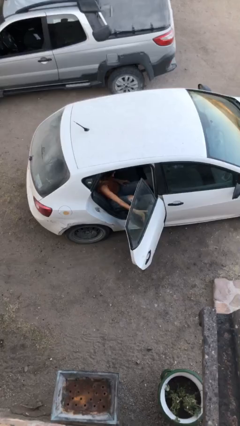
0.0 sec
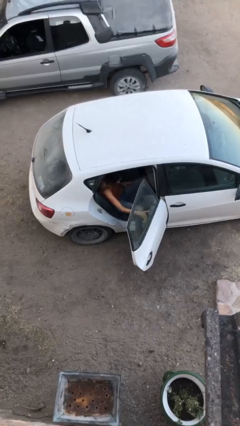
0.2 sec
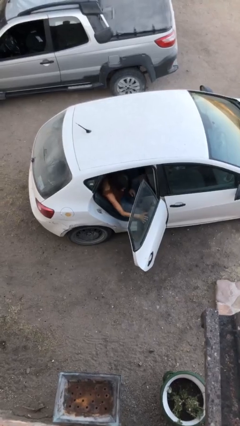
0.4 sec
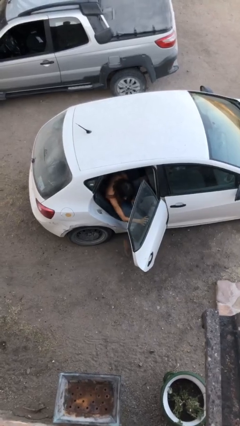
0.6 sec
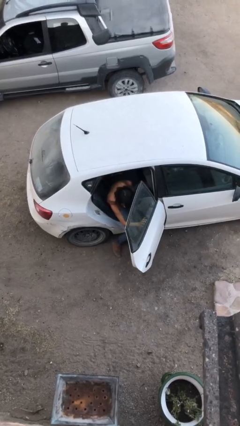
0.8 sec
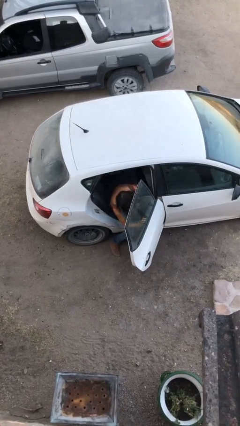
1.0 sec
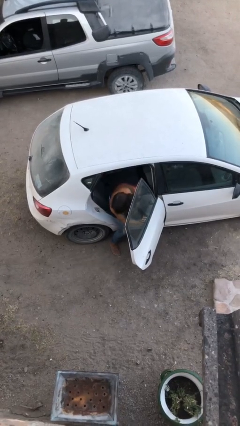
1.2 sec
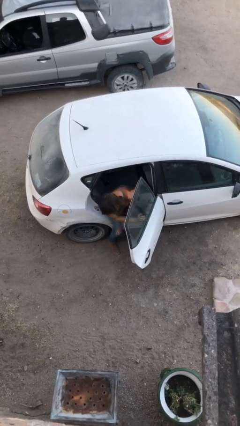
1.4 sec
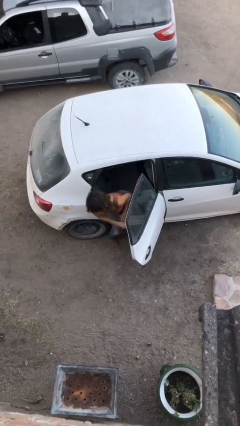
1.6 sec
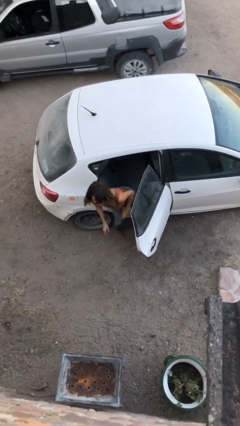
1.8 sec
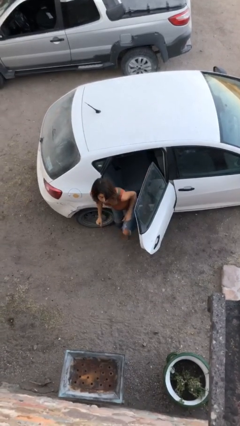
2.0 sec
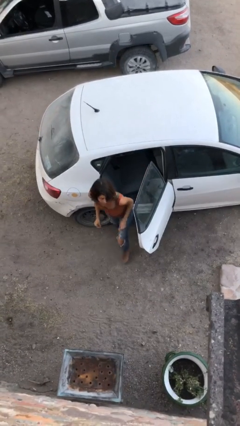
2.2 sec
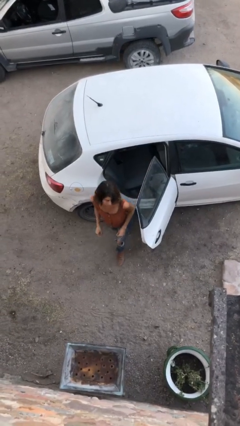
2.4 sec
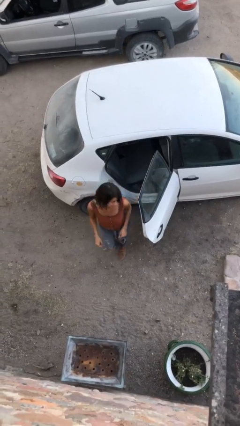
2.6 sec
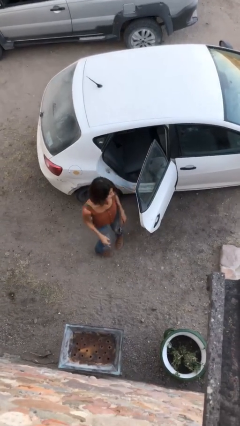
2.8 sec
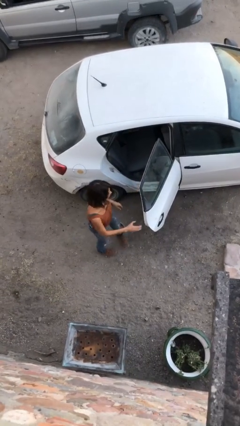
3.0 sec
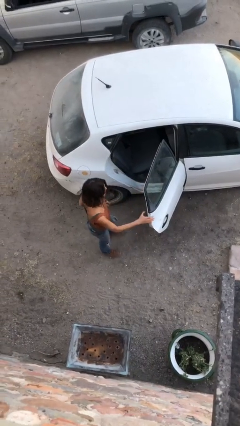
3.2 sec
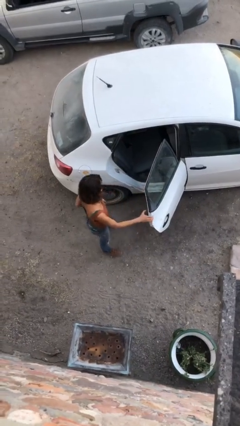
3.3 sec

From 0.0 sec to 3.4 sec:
person exits car

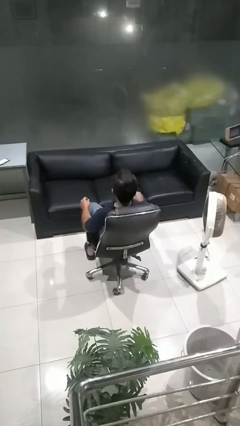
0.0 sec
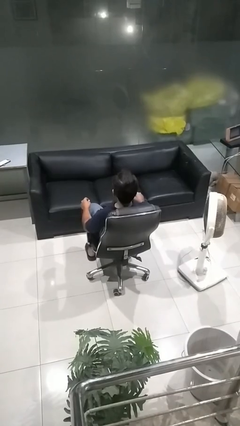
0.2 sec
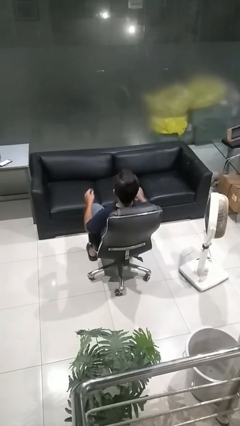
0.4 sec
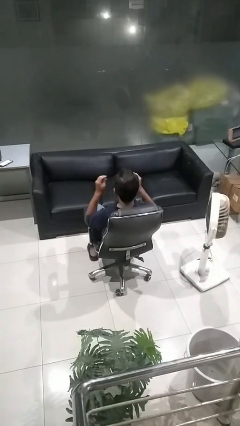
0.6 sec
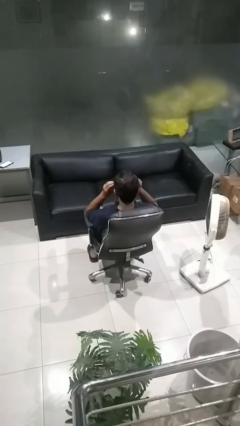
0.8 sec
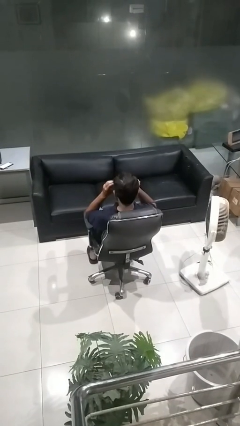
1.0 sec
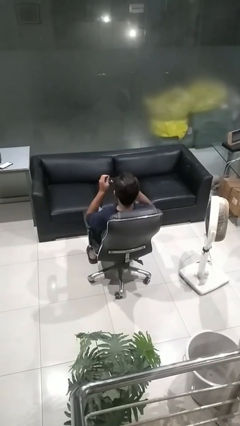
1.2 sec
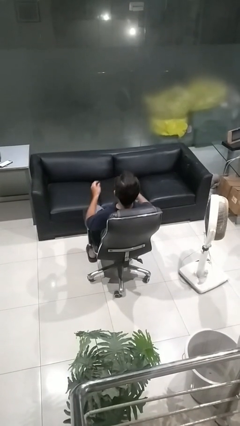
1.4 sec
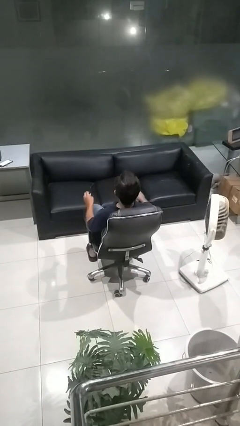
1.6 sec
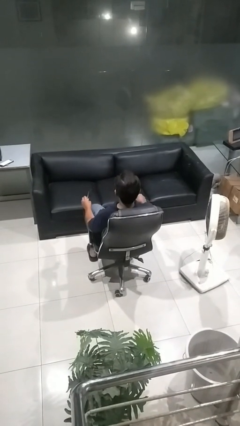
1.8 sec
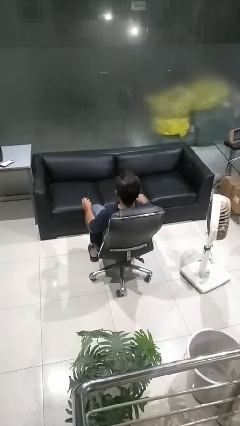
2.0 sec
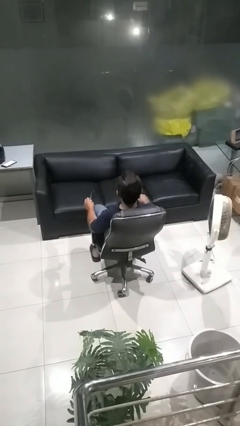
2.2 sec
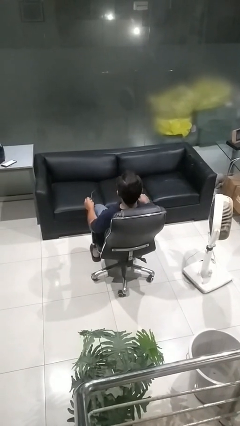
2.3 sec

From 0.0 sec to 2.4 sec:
person takes off sunglasses

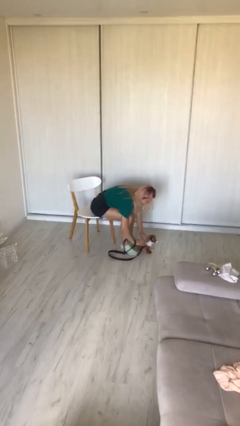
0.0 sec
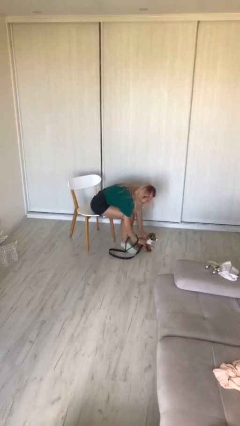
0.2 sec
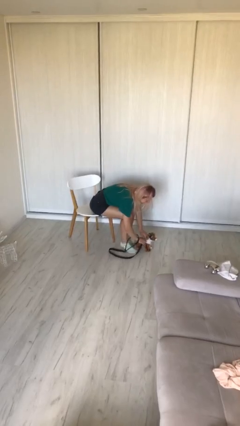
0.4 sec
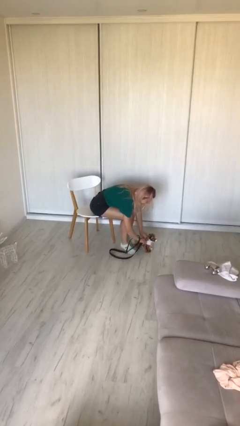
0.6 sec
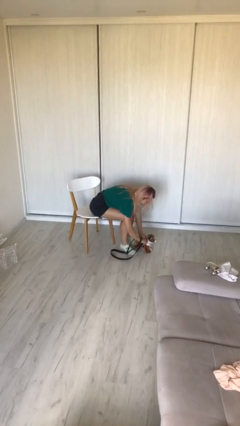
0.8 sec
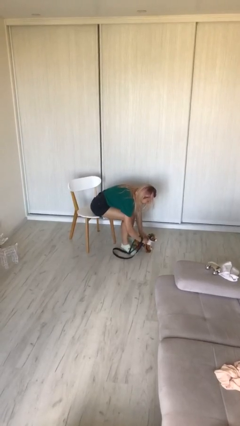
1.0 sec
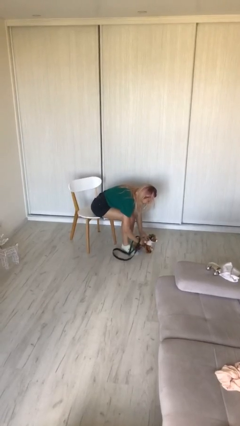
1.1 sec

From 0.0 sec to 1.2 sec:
person unattaches leash from dog

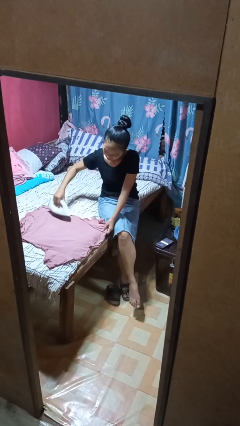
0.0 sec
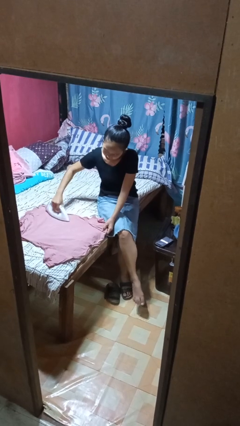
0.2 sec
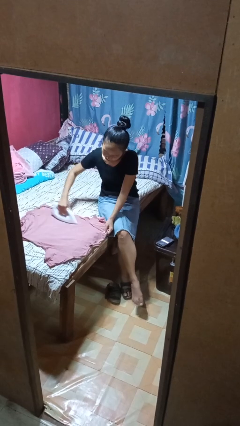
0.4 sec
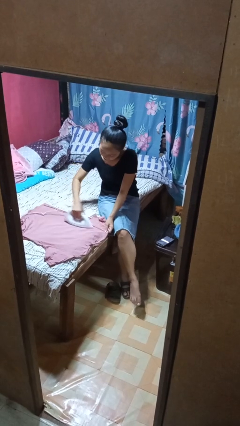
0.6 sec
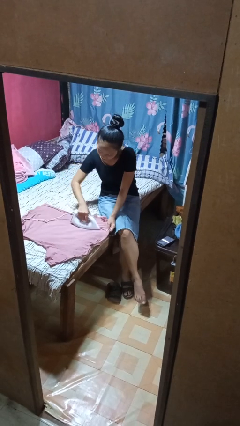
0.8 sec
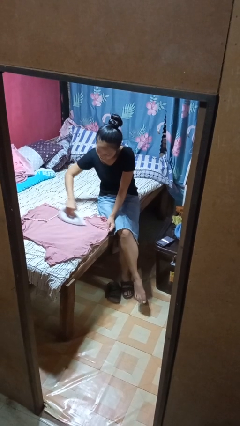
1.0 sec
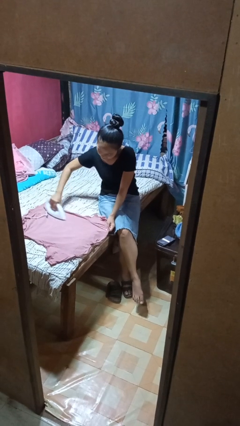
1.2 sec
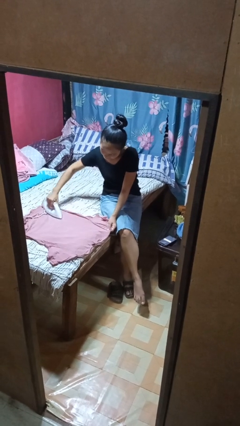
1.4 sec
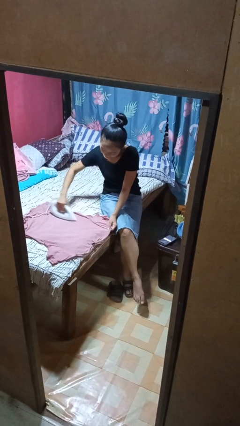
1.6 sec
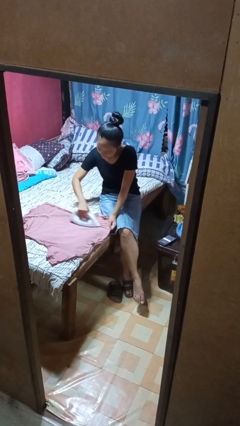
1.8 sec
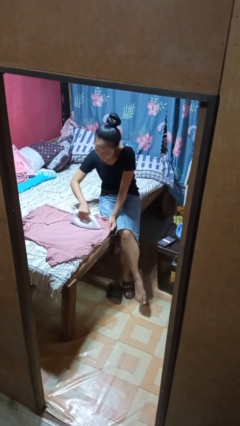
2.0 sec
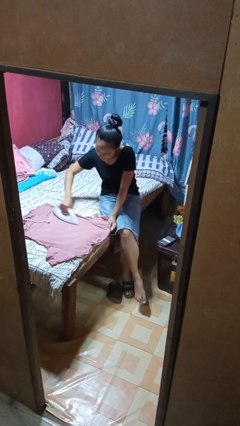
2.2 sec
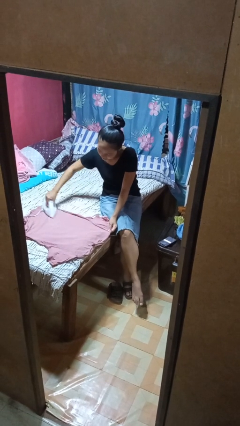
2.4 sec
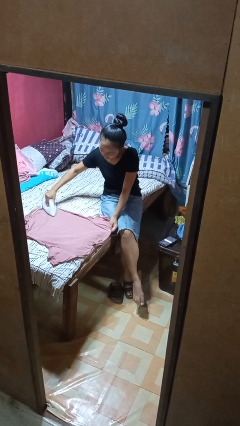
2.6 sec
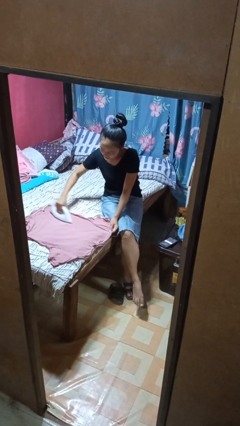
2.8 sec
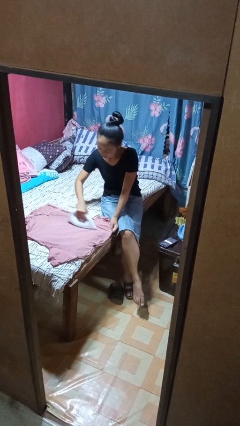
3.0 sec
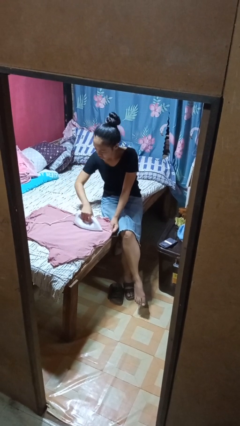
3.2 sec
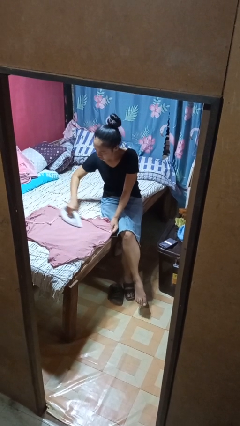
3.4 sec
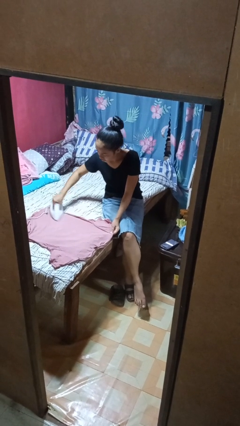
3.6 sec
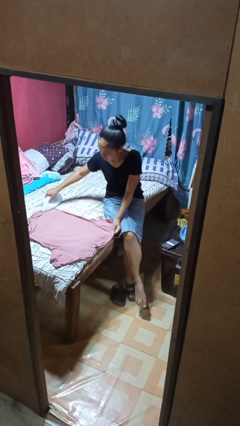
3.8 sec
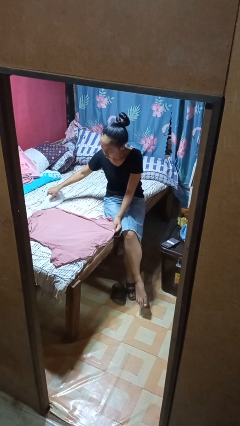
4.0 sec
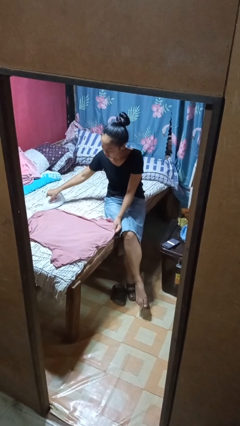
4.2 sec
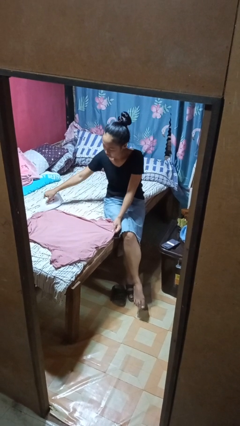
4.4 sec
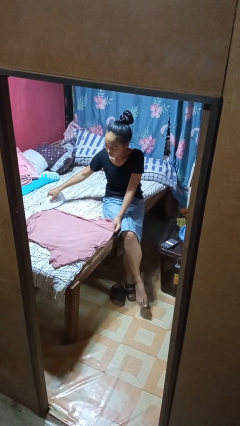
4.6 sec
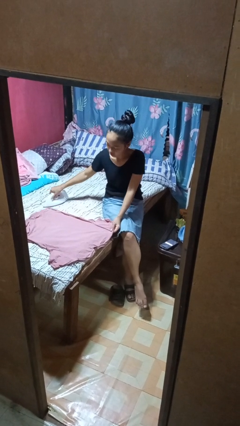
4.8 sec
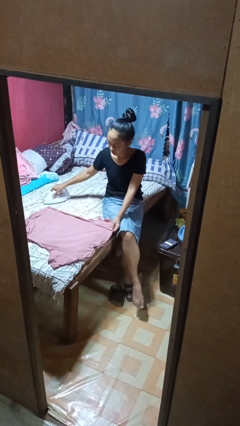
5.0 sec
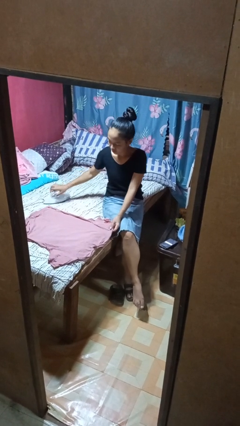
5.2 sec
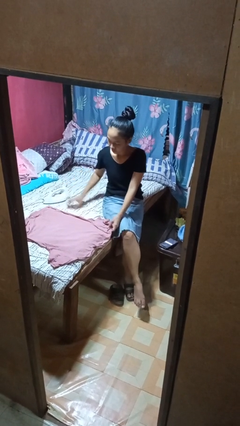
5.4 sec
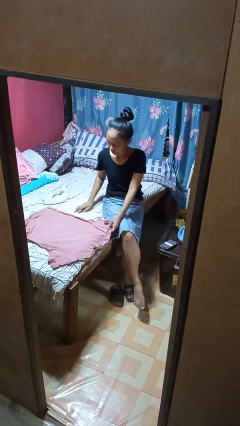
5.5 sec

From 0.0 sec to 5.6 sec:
person irons clothes

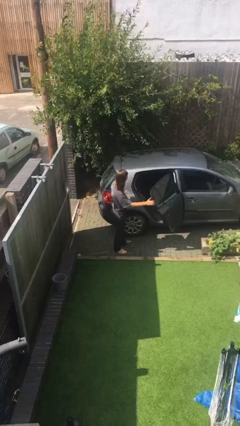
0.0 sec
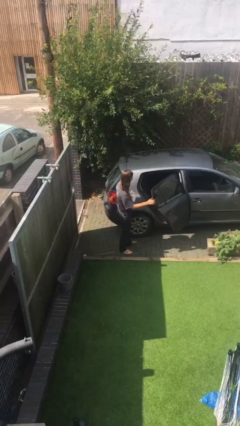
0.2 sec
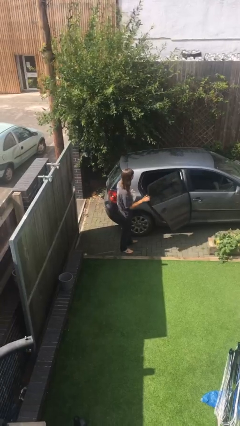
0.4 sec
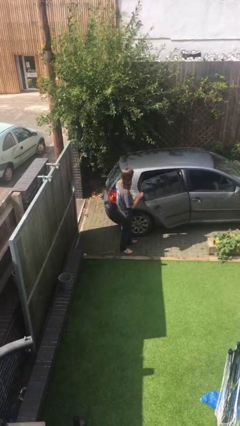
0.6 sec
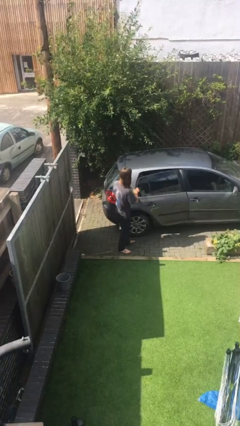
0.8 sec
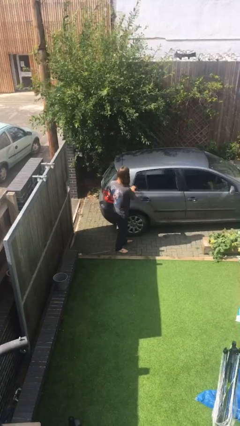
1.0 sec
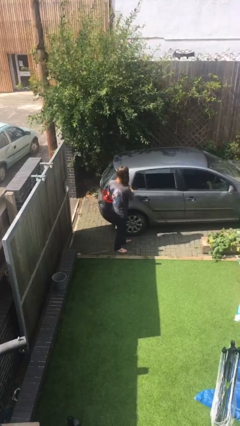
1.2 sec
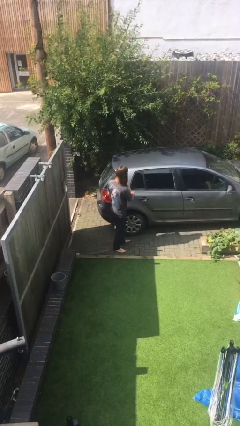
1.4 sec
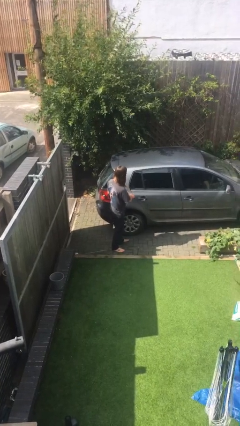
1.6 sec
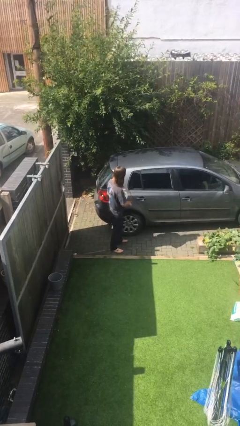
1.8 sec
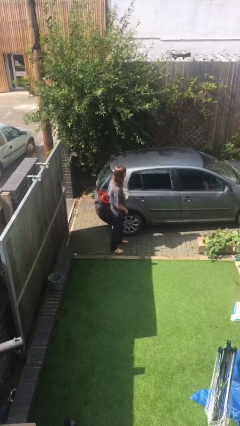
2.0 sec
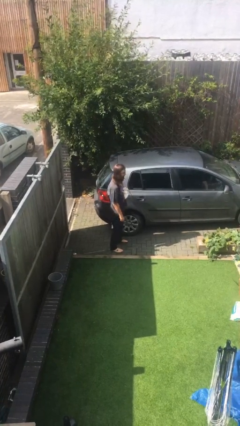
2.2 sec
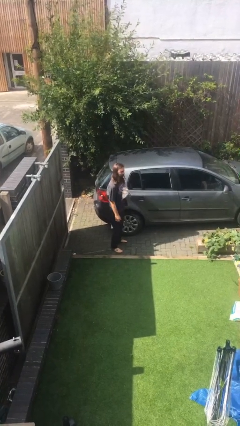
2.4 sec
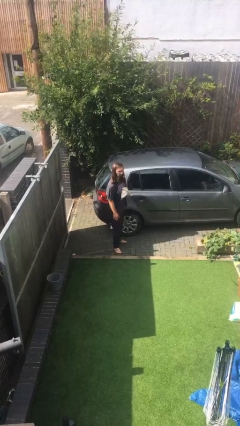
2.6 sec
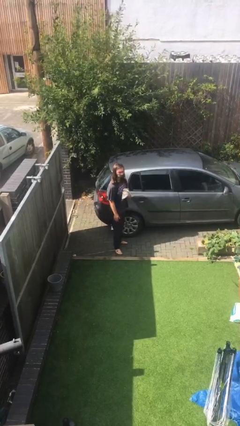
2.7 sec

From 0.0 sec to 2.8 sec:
person closes car door

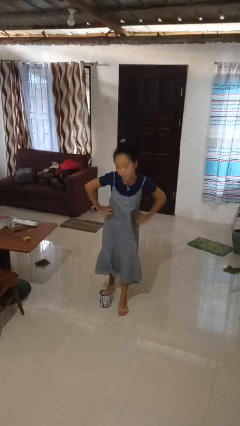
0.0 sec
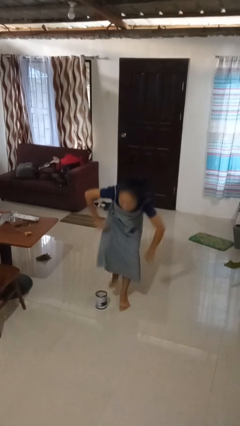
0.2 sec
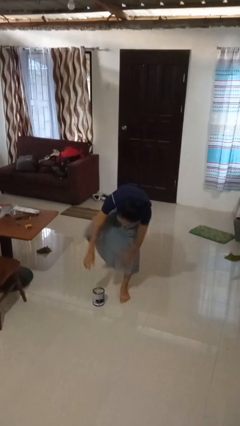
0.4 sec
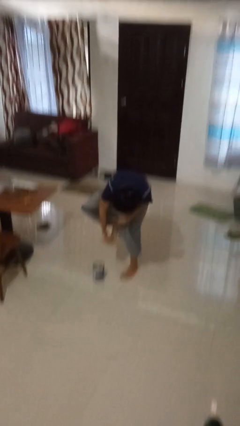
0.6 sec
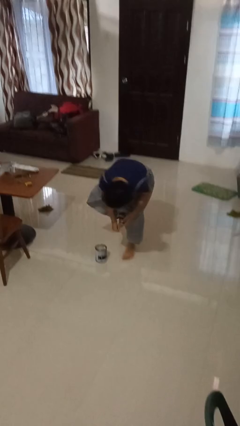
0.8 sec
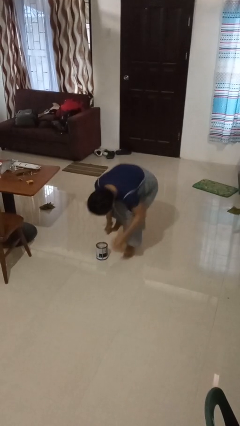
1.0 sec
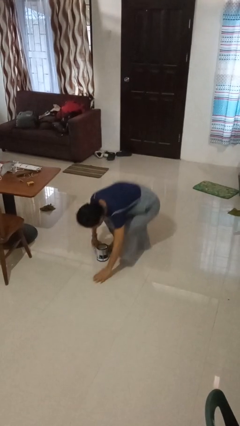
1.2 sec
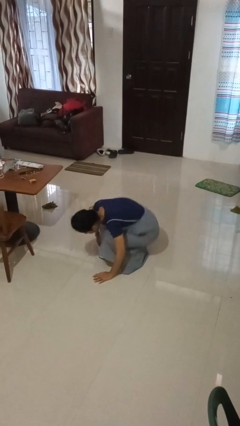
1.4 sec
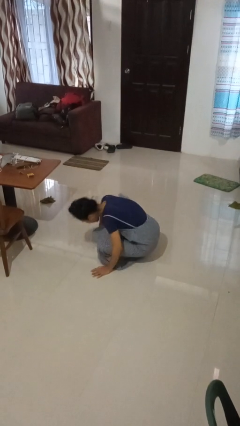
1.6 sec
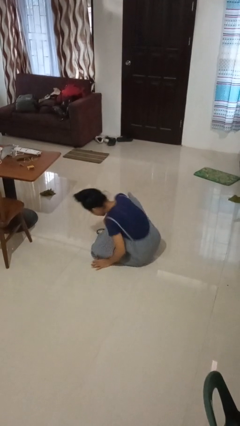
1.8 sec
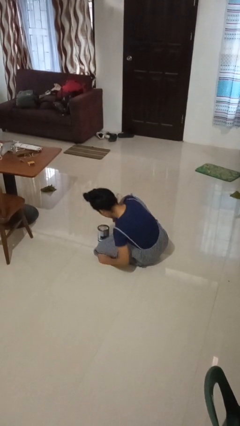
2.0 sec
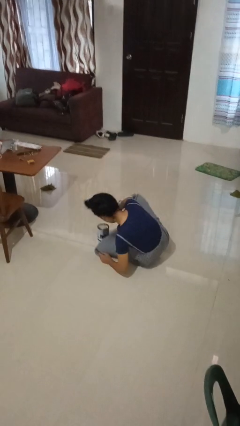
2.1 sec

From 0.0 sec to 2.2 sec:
person trips on object on floor
